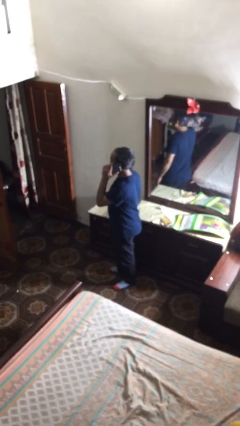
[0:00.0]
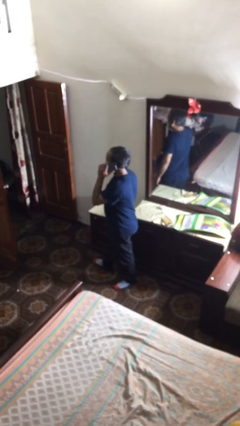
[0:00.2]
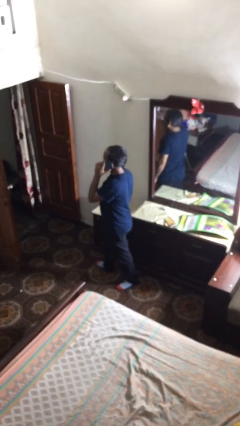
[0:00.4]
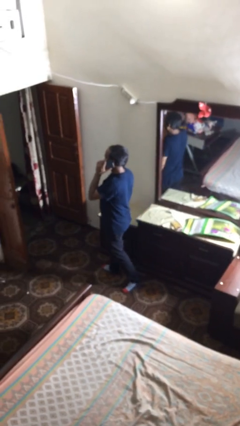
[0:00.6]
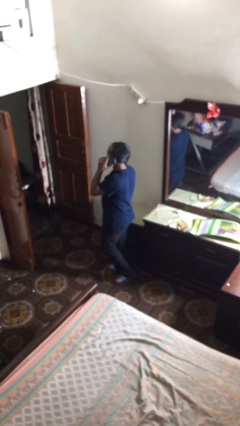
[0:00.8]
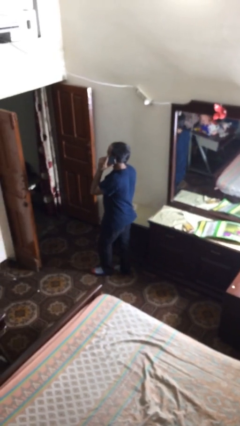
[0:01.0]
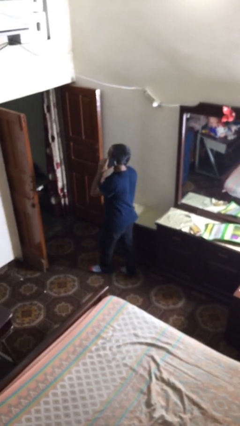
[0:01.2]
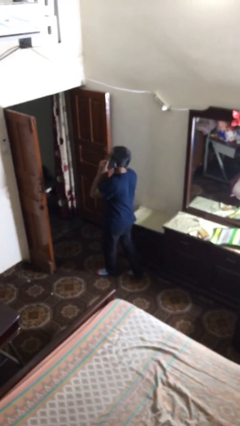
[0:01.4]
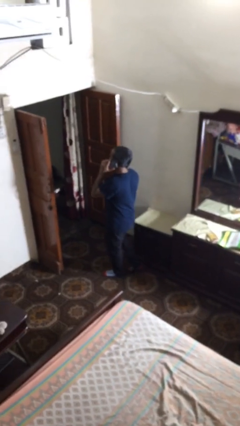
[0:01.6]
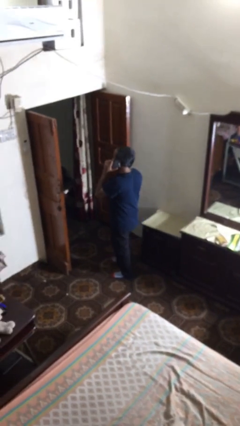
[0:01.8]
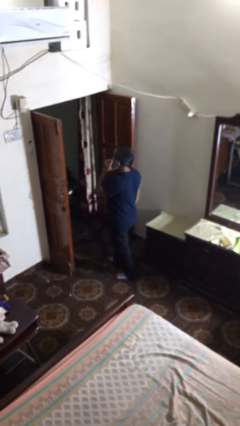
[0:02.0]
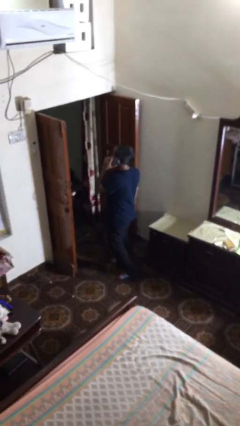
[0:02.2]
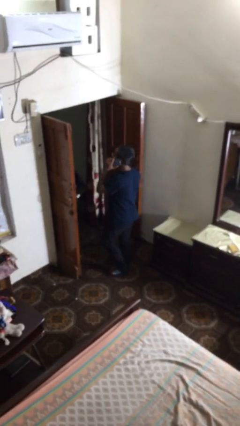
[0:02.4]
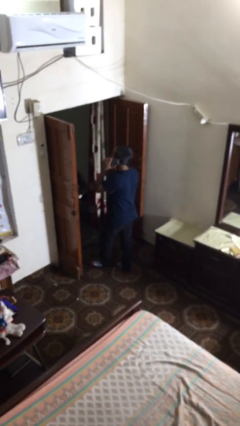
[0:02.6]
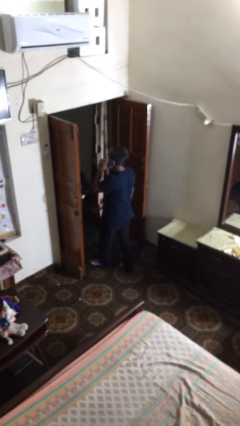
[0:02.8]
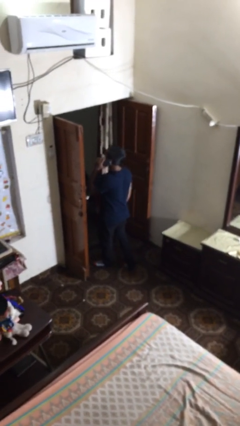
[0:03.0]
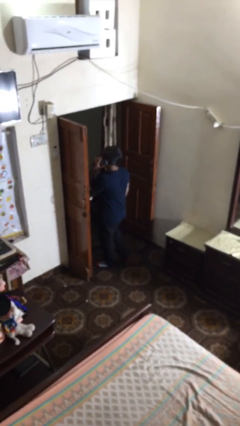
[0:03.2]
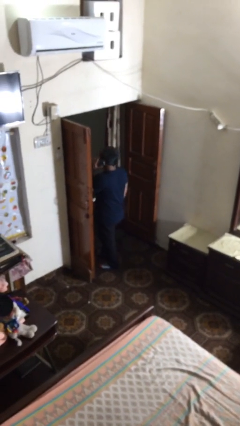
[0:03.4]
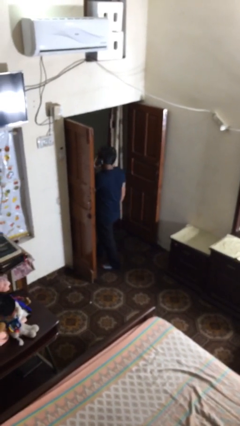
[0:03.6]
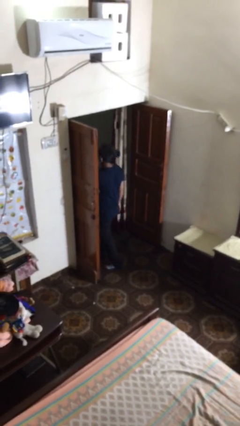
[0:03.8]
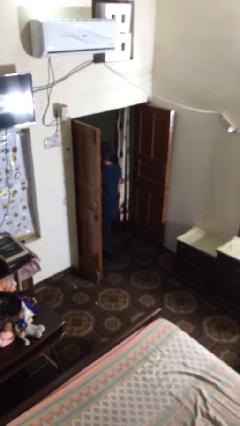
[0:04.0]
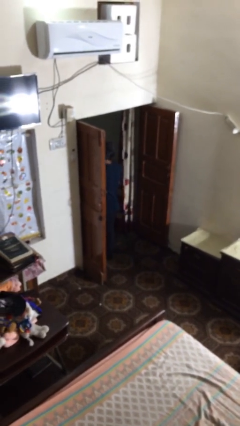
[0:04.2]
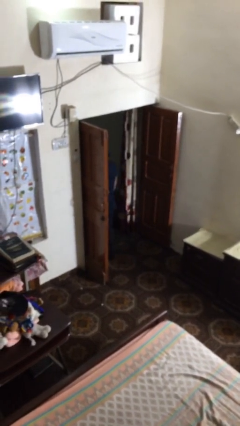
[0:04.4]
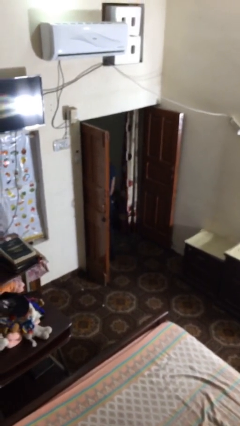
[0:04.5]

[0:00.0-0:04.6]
person exits scene through structure

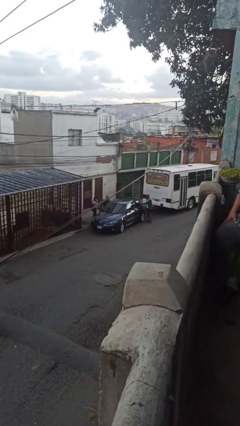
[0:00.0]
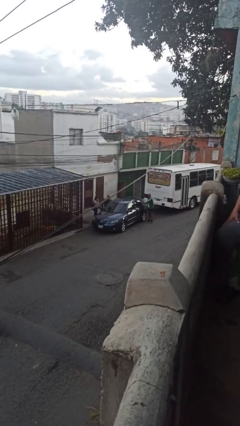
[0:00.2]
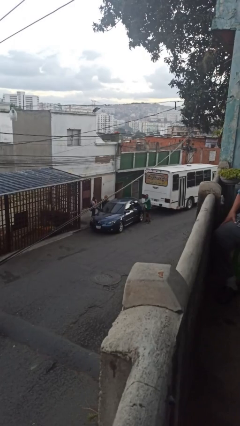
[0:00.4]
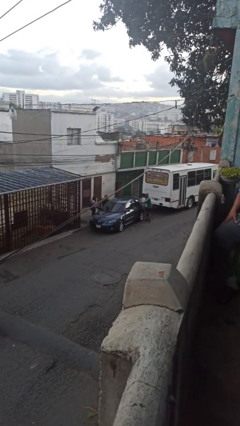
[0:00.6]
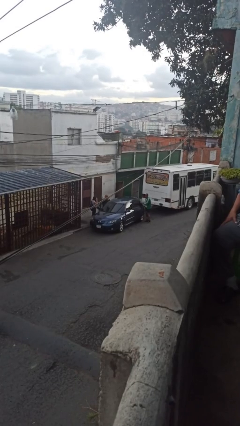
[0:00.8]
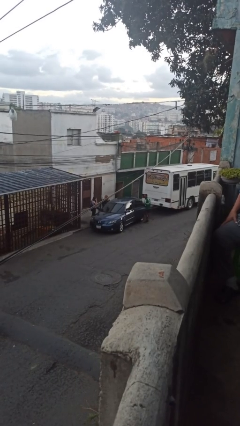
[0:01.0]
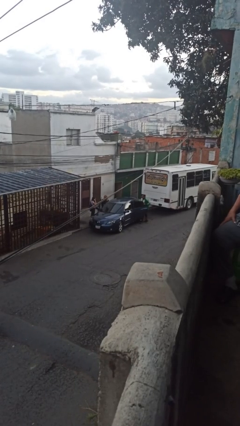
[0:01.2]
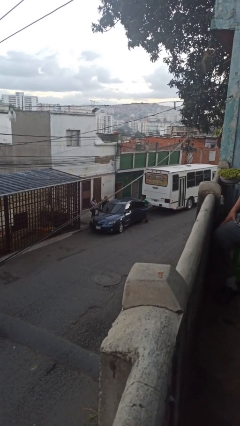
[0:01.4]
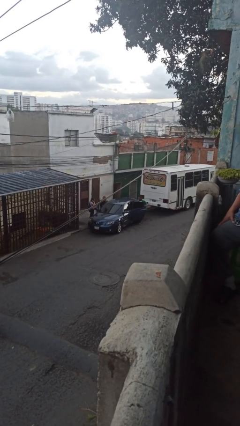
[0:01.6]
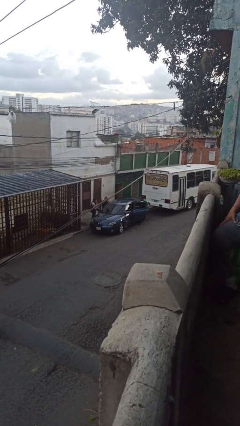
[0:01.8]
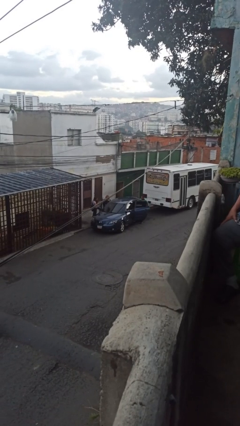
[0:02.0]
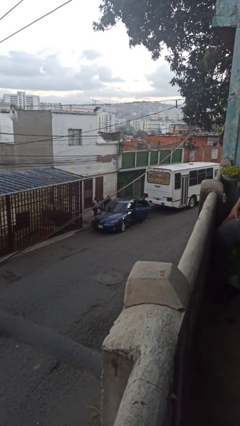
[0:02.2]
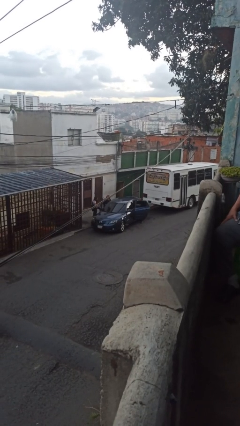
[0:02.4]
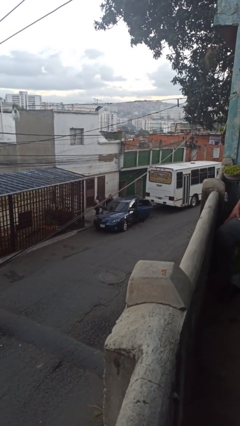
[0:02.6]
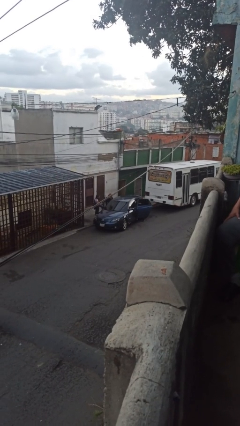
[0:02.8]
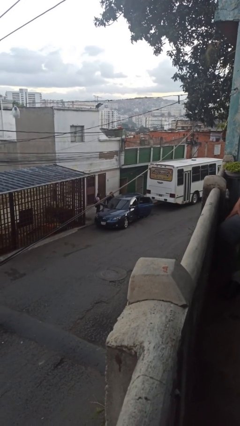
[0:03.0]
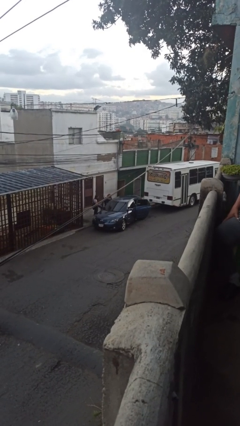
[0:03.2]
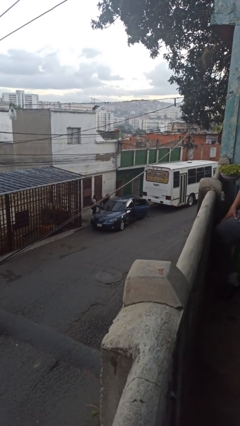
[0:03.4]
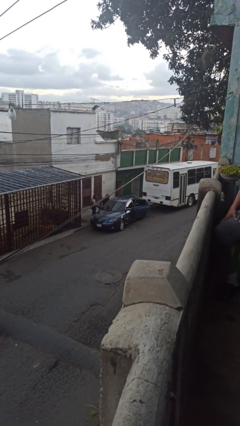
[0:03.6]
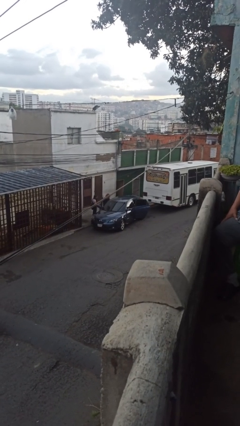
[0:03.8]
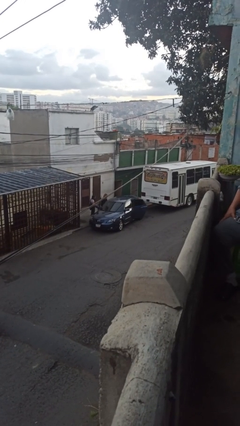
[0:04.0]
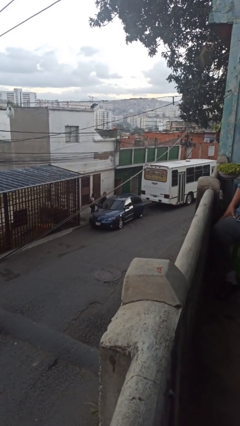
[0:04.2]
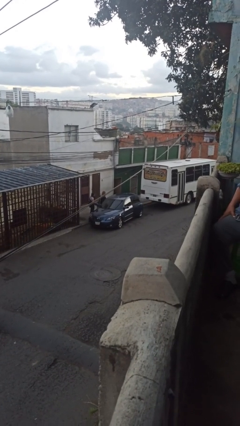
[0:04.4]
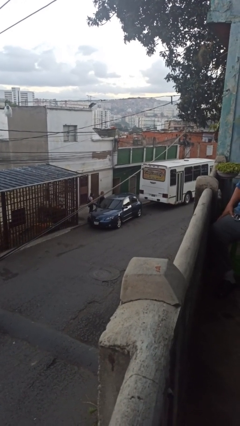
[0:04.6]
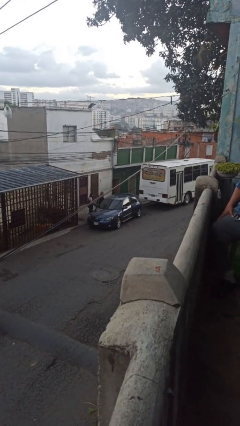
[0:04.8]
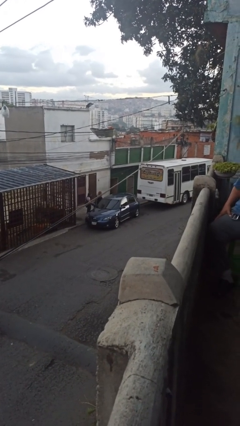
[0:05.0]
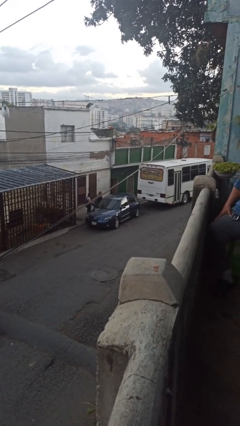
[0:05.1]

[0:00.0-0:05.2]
car picks up person

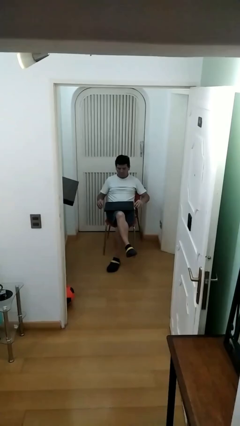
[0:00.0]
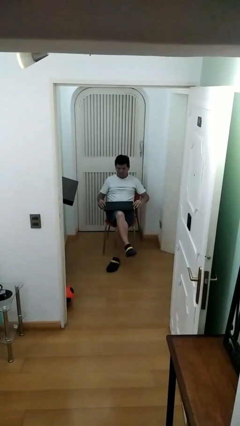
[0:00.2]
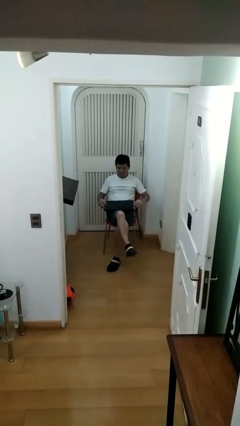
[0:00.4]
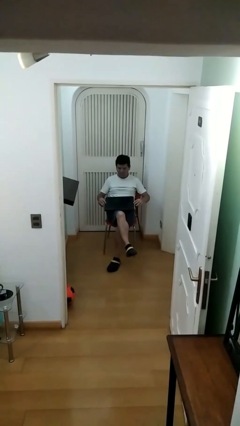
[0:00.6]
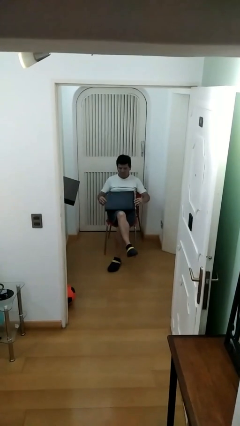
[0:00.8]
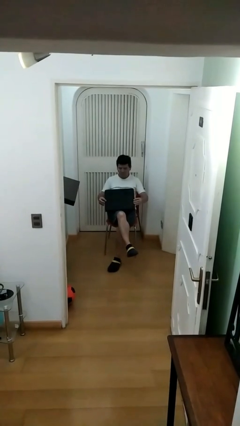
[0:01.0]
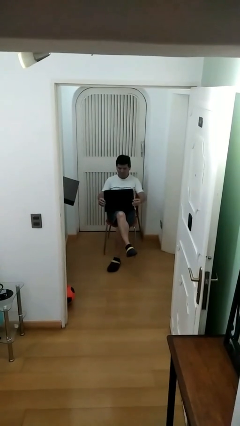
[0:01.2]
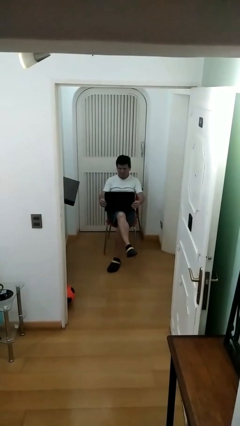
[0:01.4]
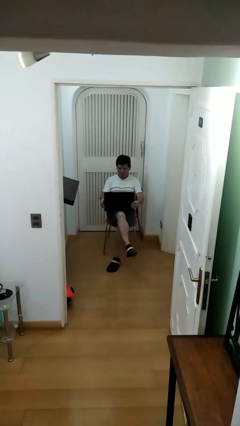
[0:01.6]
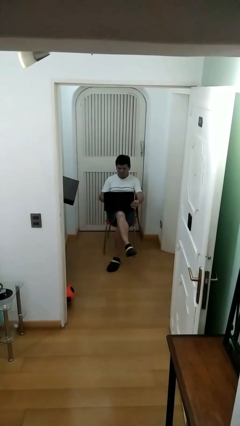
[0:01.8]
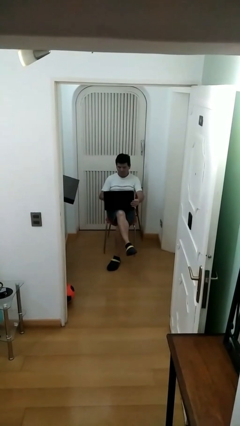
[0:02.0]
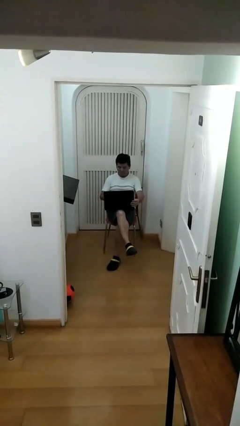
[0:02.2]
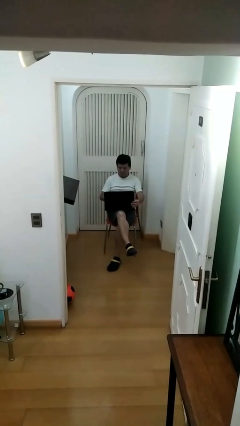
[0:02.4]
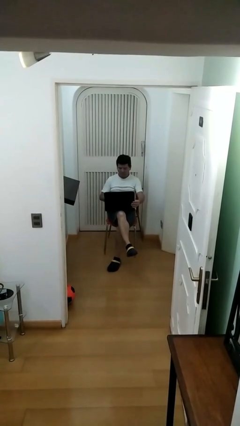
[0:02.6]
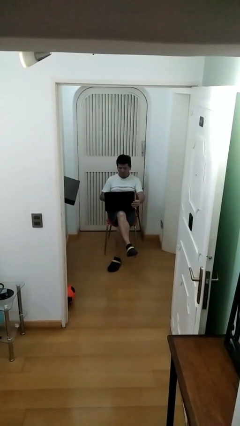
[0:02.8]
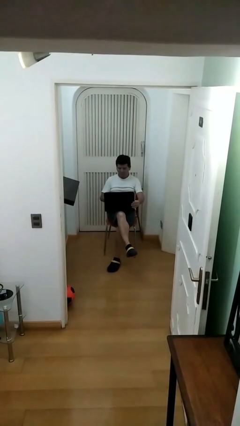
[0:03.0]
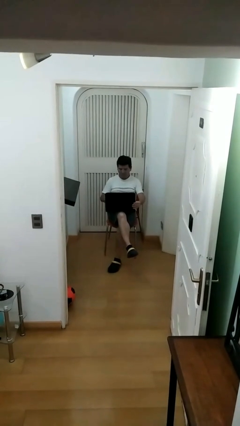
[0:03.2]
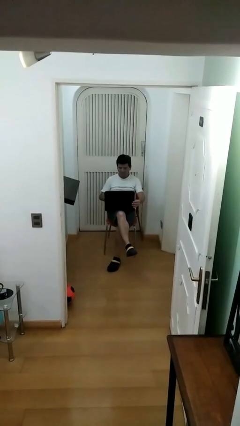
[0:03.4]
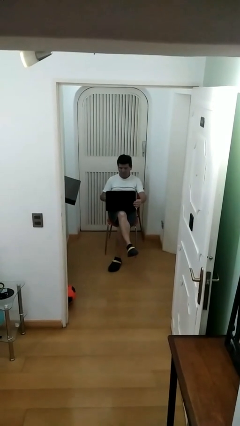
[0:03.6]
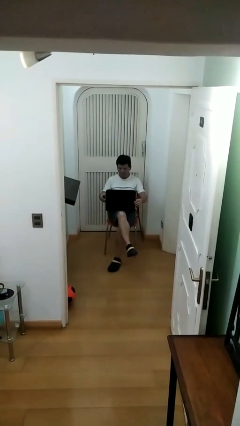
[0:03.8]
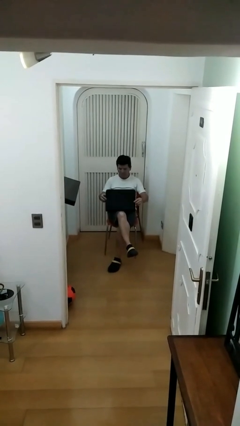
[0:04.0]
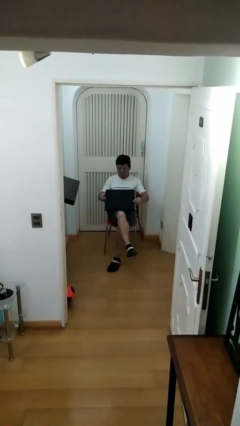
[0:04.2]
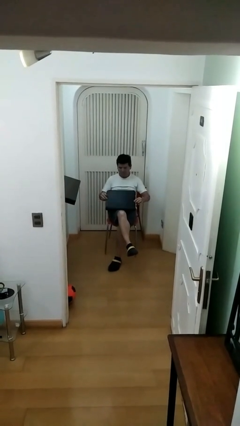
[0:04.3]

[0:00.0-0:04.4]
person interacts with laptop

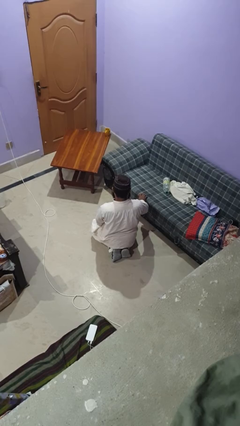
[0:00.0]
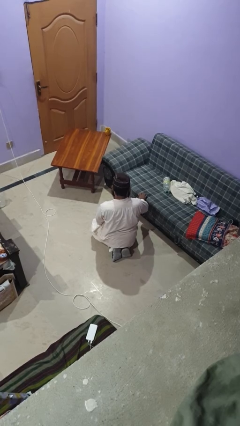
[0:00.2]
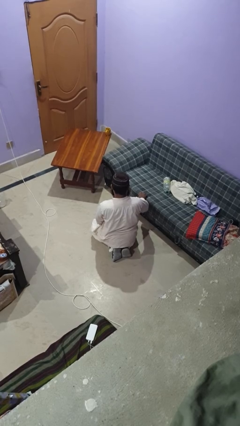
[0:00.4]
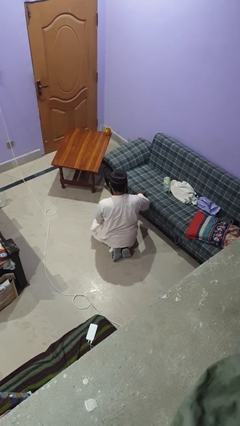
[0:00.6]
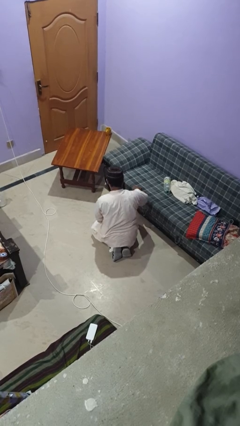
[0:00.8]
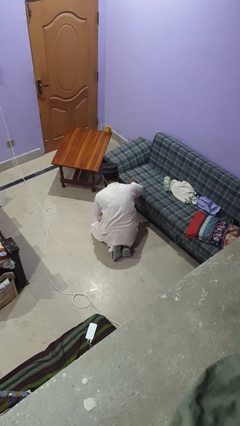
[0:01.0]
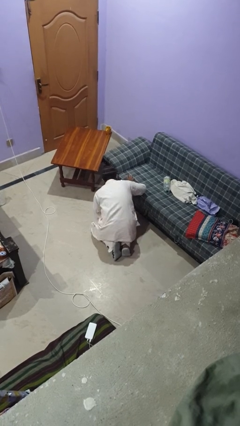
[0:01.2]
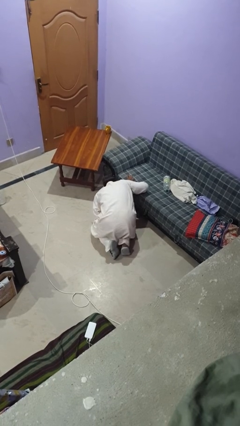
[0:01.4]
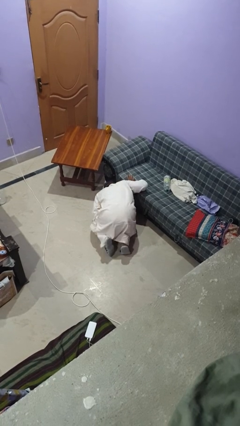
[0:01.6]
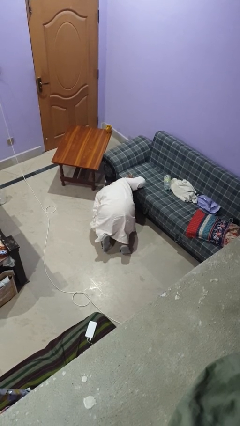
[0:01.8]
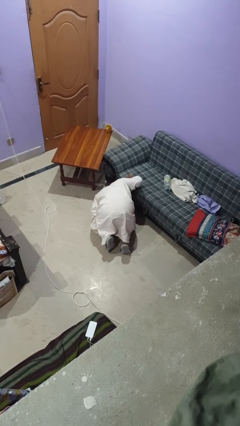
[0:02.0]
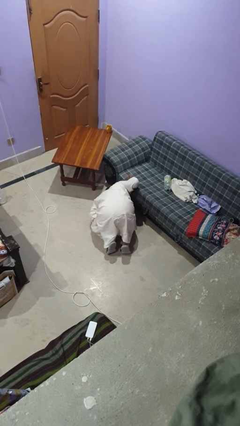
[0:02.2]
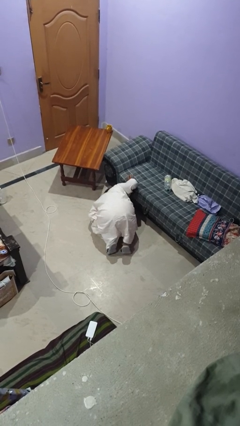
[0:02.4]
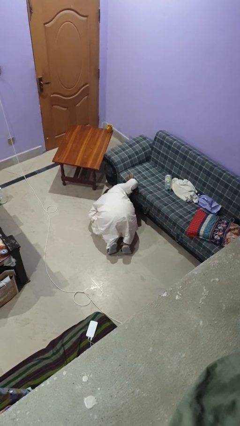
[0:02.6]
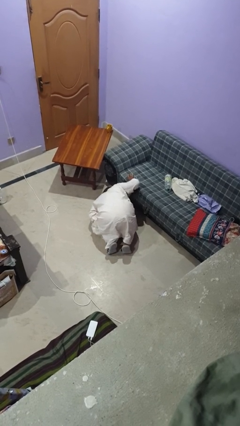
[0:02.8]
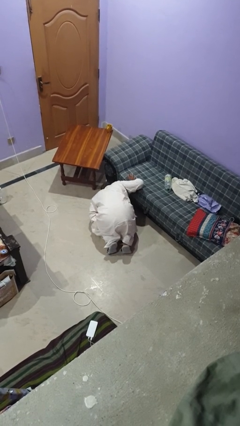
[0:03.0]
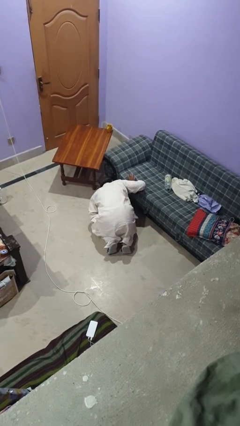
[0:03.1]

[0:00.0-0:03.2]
person searches under couch
